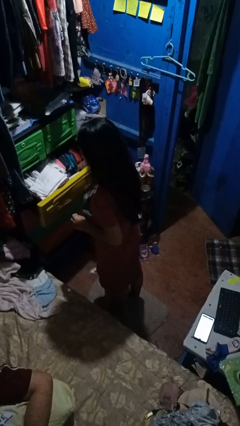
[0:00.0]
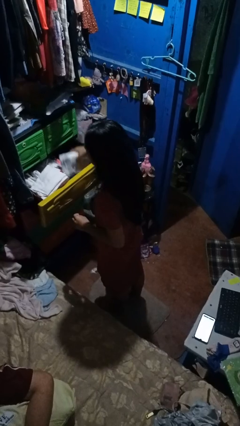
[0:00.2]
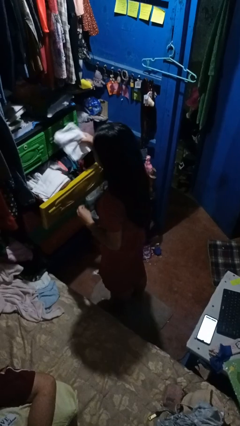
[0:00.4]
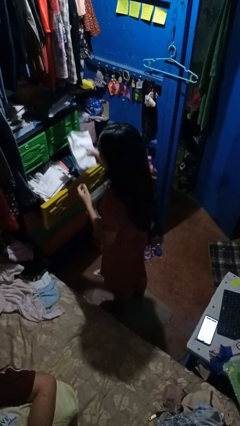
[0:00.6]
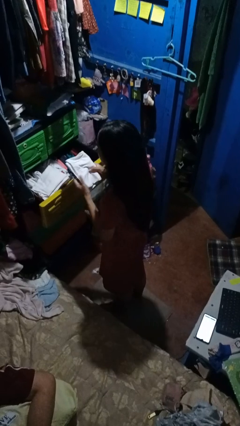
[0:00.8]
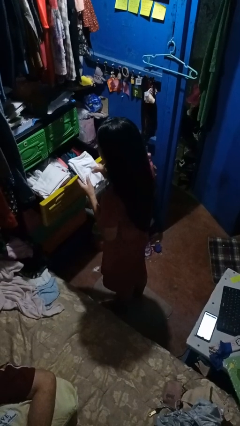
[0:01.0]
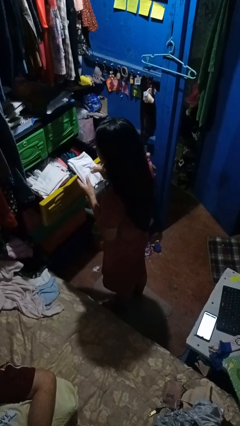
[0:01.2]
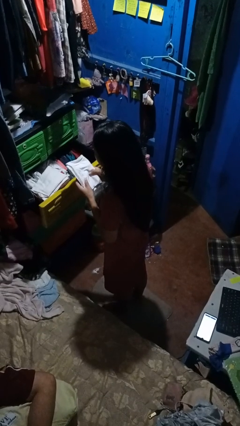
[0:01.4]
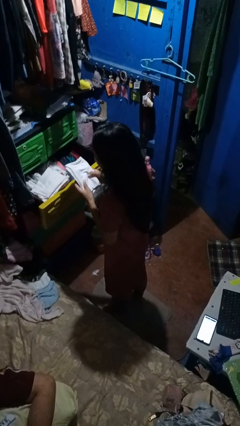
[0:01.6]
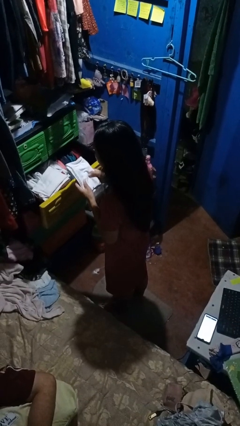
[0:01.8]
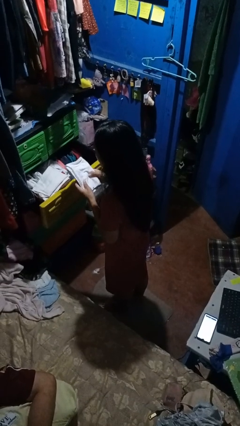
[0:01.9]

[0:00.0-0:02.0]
person takes clothes from dresser

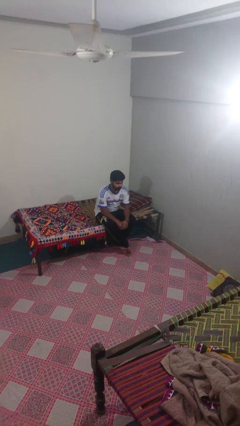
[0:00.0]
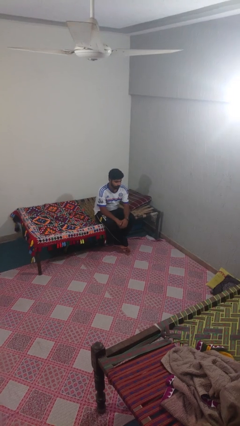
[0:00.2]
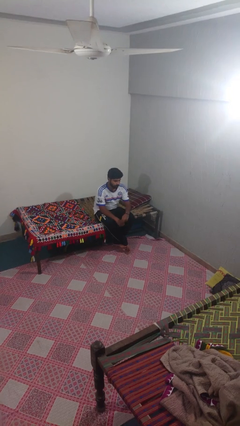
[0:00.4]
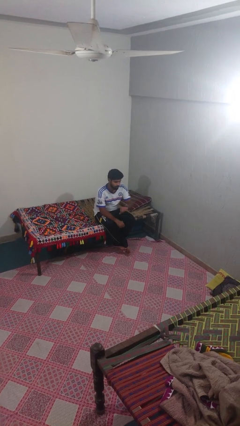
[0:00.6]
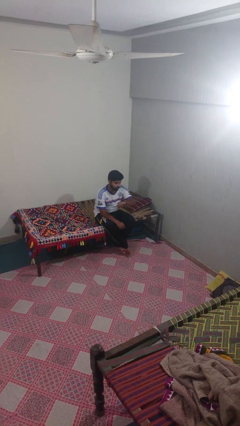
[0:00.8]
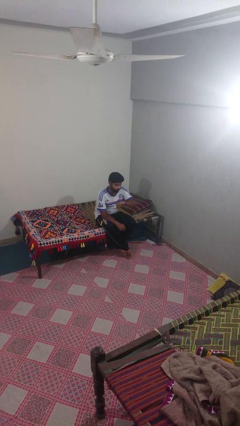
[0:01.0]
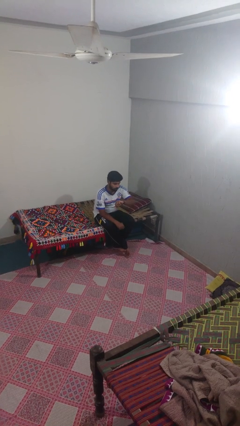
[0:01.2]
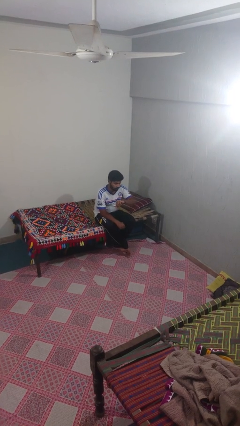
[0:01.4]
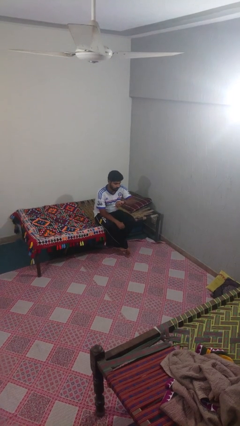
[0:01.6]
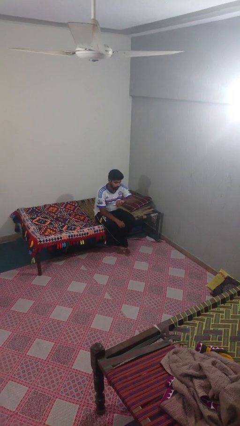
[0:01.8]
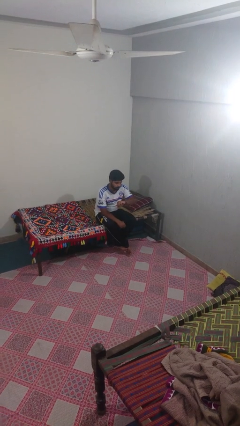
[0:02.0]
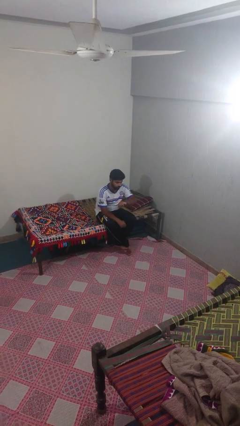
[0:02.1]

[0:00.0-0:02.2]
person looks at wristwatch

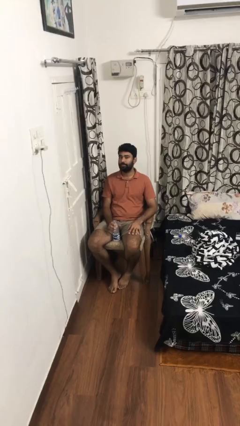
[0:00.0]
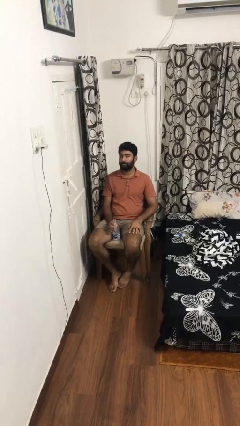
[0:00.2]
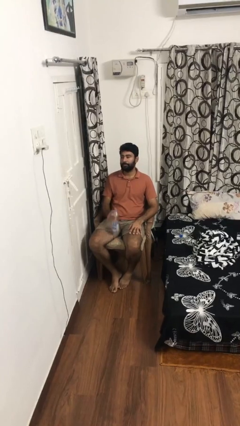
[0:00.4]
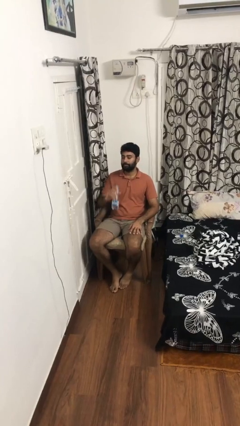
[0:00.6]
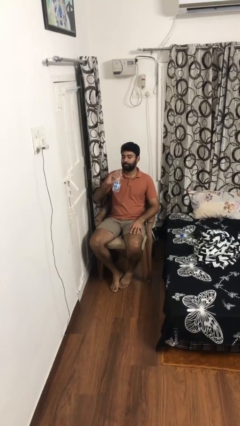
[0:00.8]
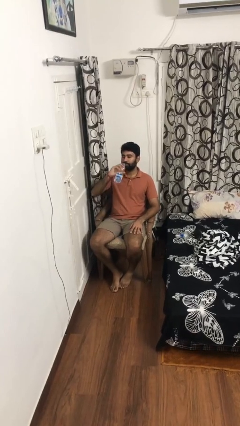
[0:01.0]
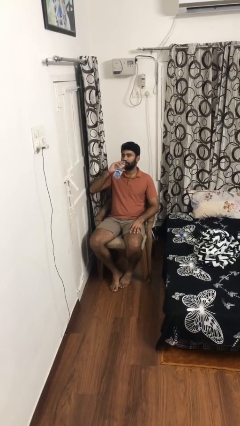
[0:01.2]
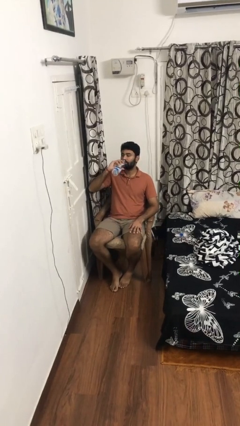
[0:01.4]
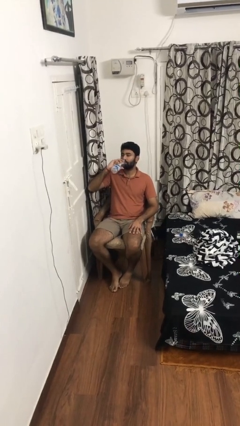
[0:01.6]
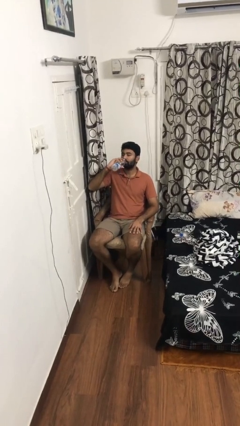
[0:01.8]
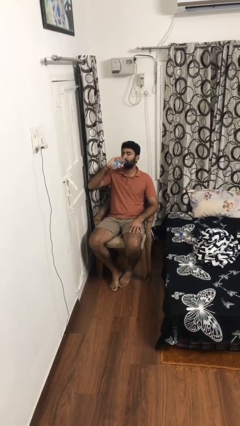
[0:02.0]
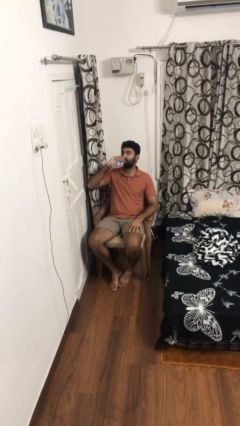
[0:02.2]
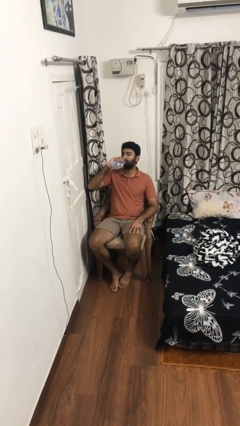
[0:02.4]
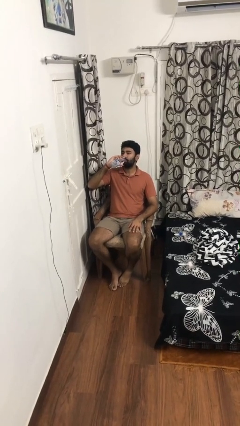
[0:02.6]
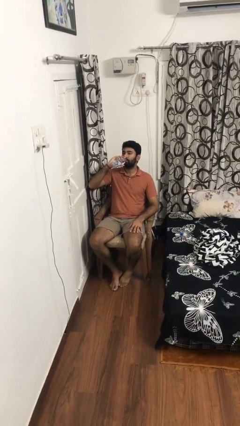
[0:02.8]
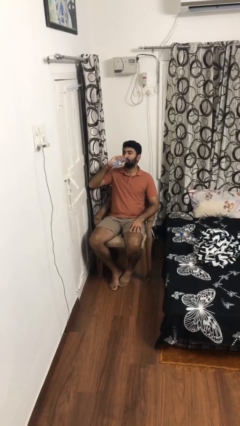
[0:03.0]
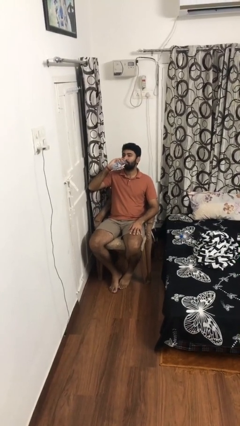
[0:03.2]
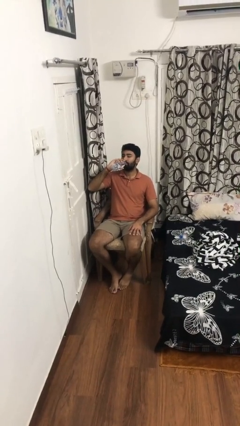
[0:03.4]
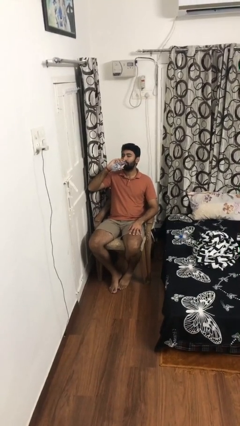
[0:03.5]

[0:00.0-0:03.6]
person drinks from bottle

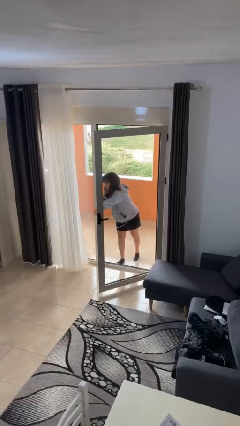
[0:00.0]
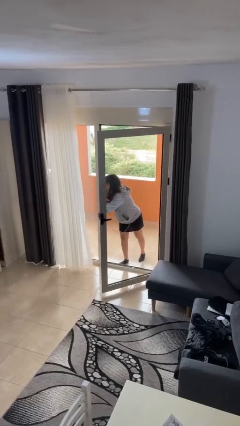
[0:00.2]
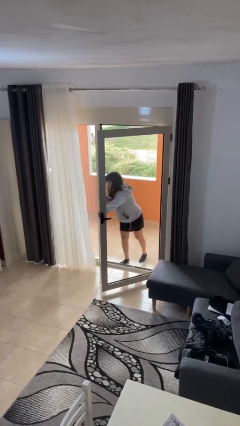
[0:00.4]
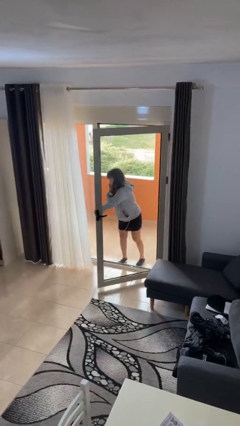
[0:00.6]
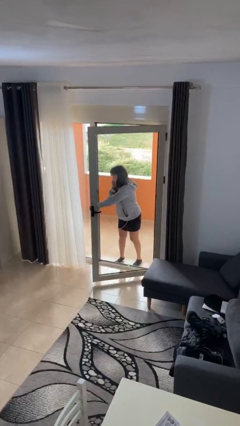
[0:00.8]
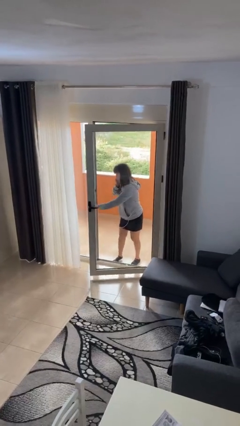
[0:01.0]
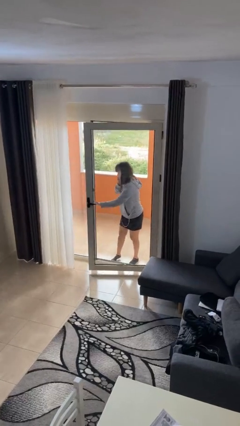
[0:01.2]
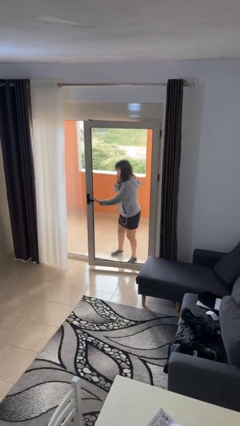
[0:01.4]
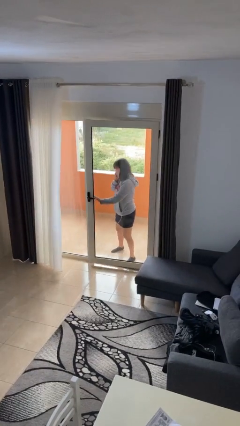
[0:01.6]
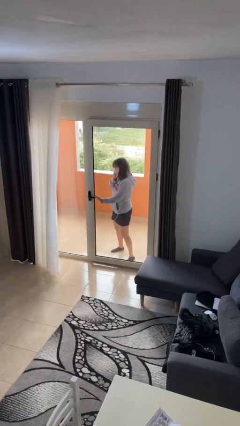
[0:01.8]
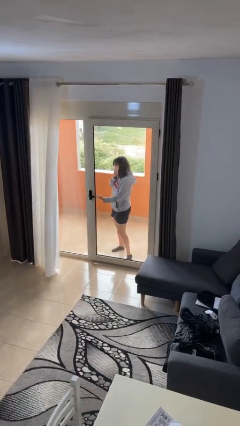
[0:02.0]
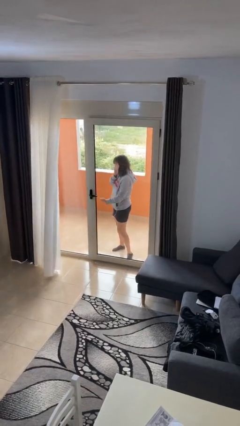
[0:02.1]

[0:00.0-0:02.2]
person closes facility door

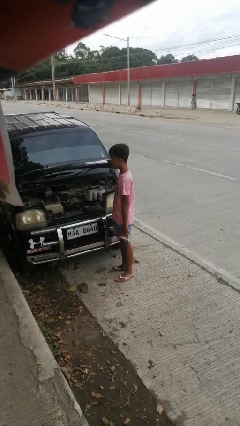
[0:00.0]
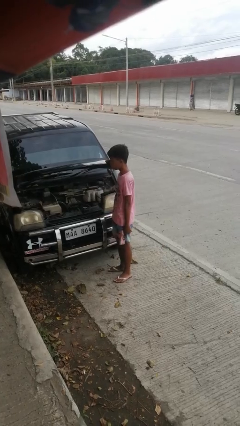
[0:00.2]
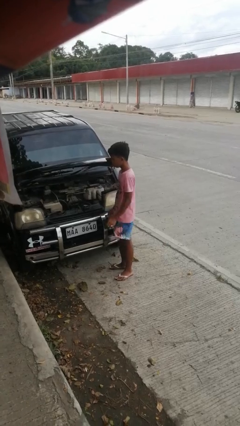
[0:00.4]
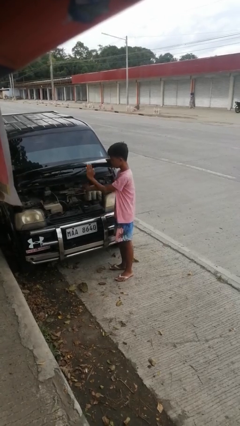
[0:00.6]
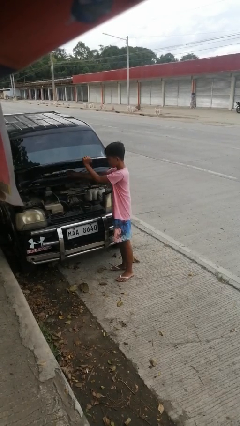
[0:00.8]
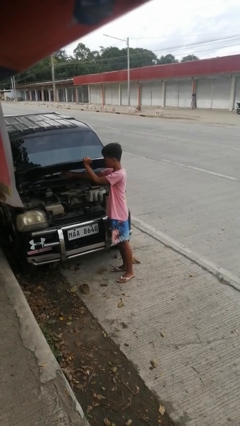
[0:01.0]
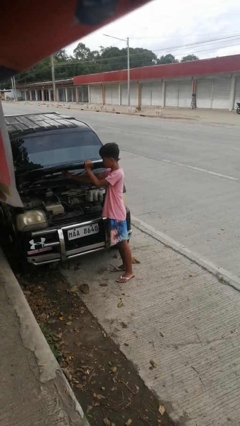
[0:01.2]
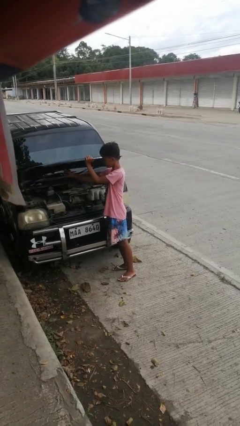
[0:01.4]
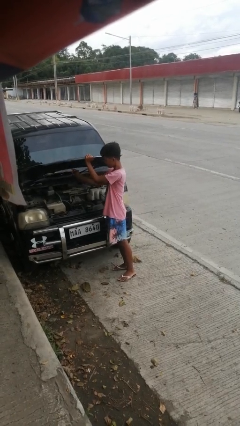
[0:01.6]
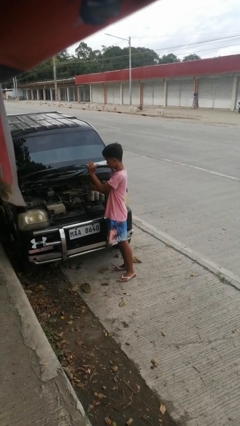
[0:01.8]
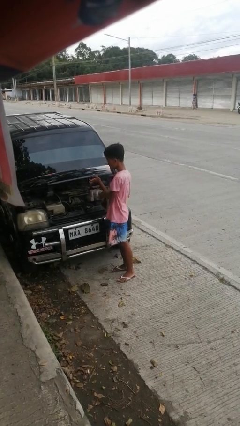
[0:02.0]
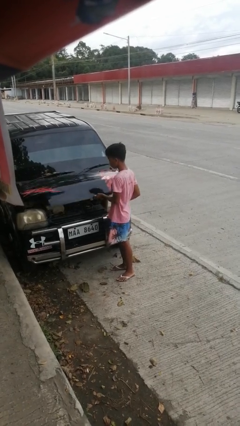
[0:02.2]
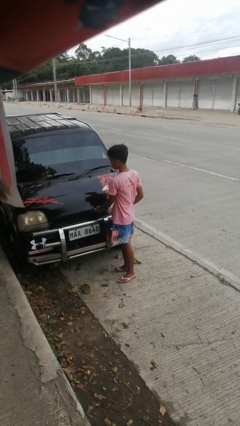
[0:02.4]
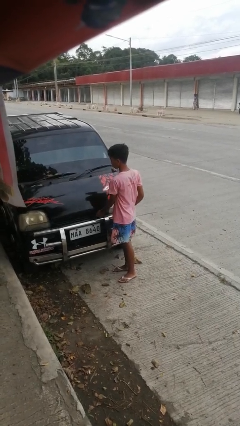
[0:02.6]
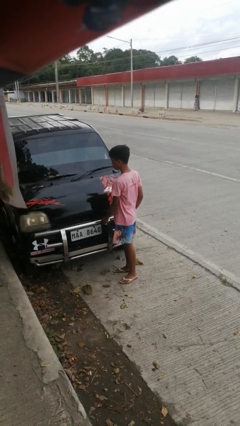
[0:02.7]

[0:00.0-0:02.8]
person closes car hood

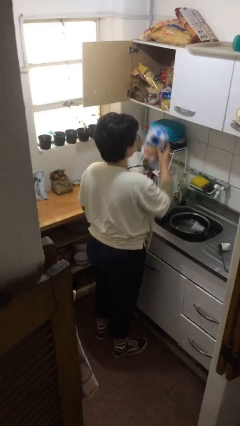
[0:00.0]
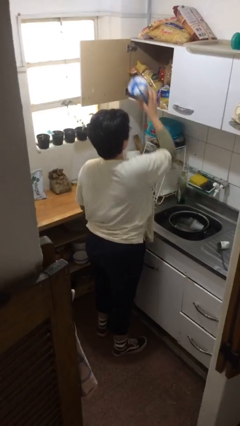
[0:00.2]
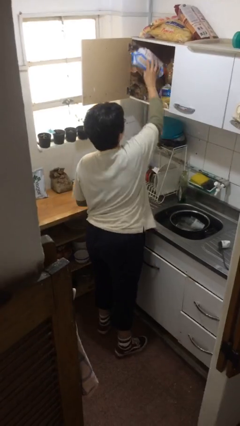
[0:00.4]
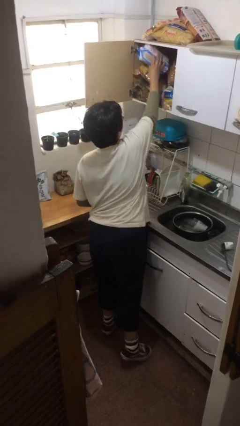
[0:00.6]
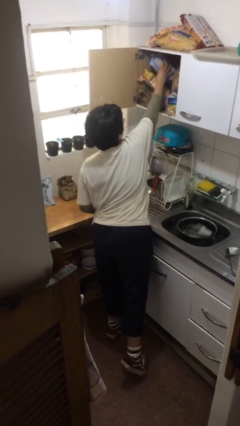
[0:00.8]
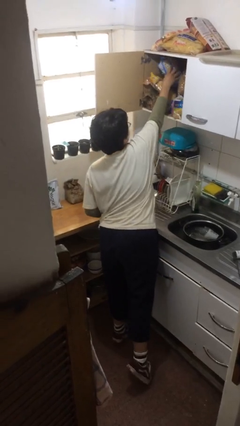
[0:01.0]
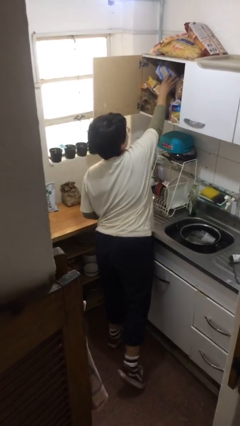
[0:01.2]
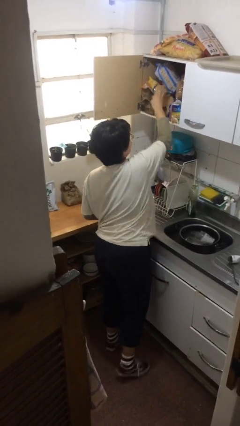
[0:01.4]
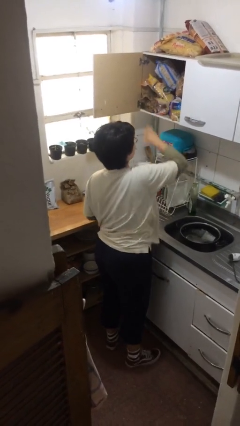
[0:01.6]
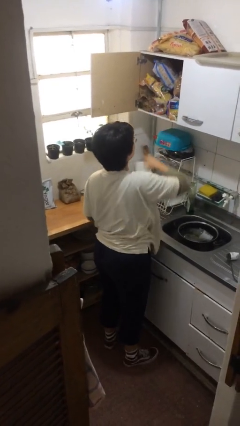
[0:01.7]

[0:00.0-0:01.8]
person puts object in cabinet

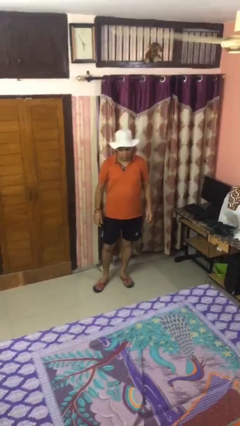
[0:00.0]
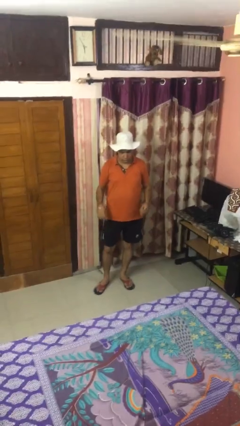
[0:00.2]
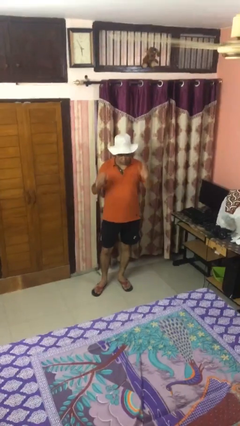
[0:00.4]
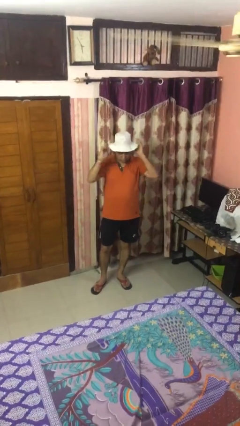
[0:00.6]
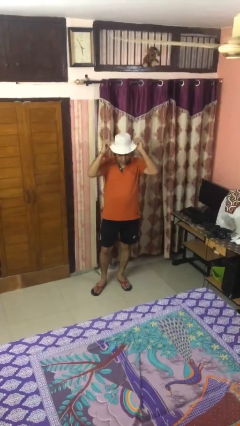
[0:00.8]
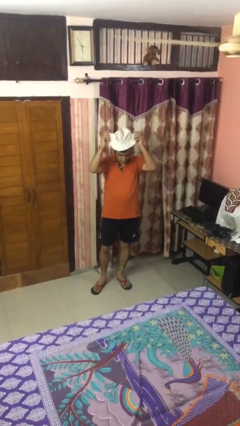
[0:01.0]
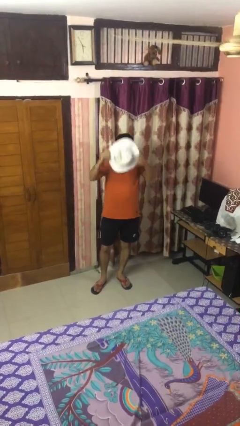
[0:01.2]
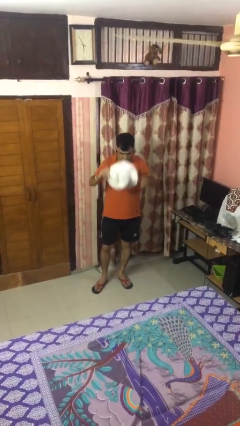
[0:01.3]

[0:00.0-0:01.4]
person takes off hat

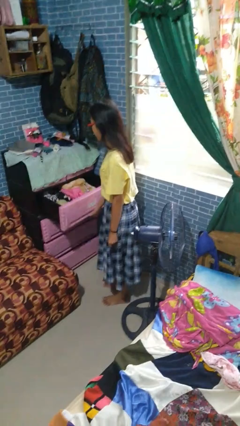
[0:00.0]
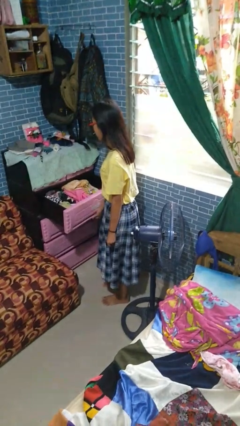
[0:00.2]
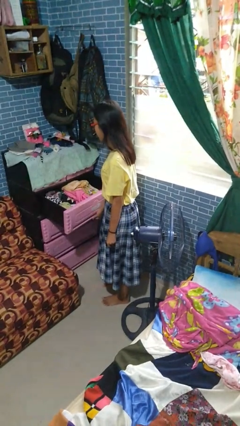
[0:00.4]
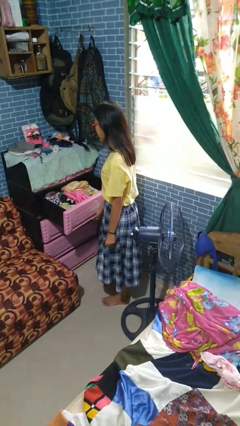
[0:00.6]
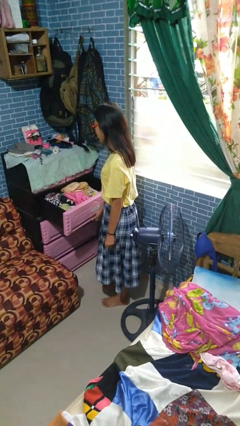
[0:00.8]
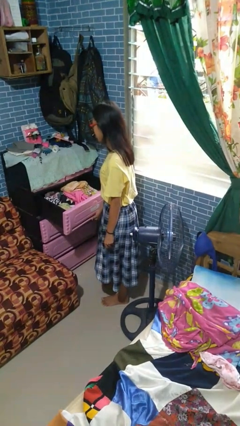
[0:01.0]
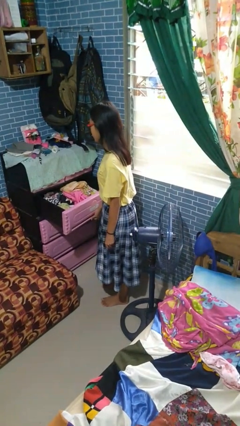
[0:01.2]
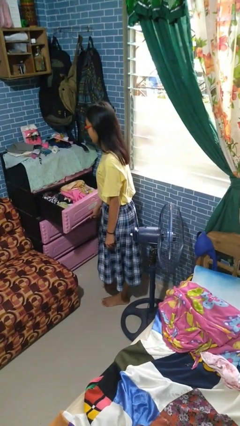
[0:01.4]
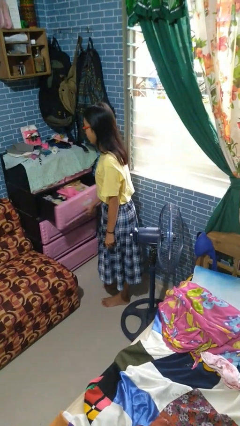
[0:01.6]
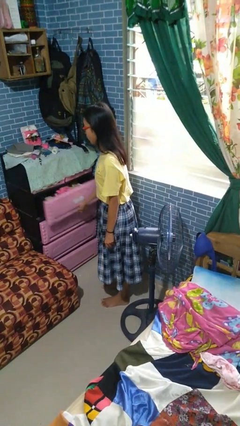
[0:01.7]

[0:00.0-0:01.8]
person opens dresser drawer
